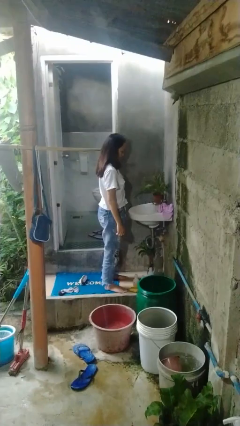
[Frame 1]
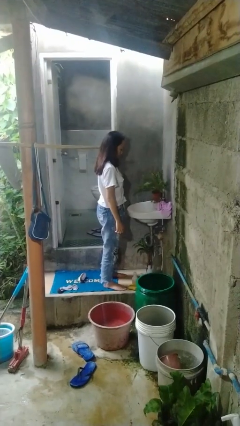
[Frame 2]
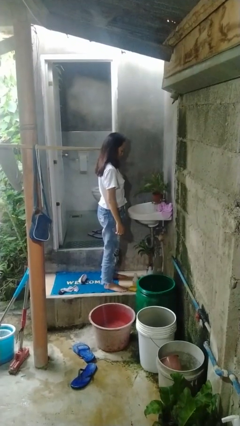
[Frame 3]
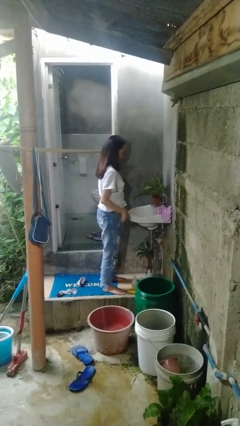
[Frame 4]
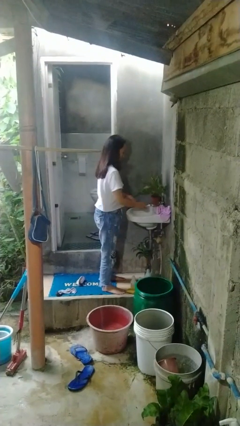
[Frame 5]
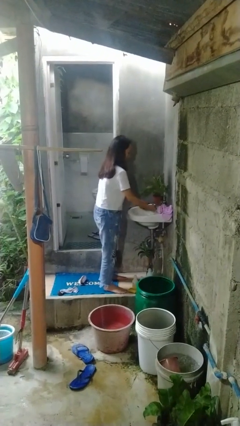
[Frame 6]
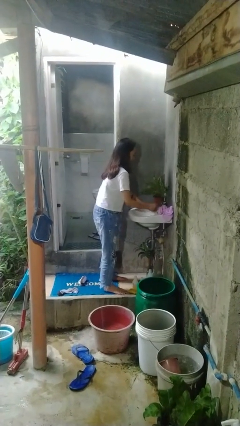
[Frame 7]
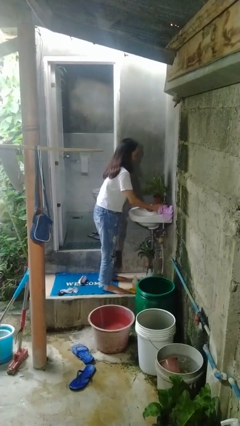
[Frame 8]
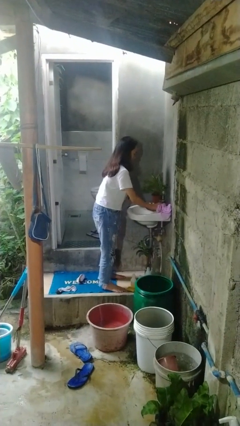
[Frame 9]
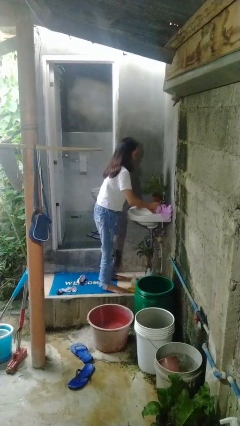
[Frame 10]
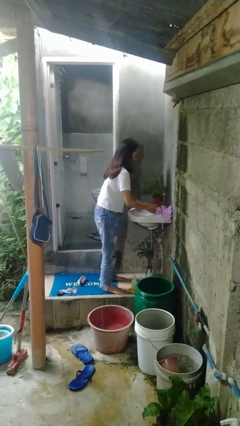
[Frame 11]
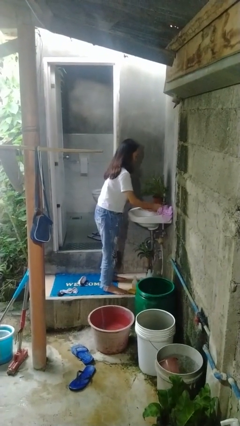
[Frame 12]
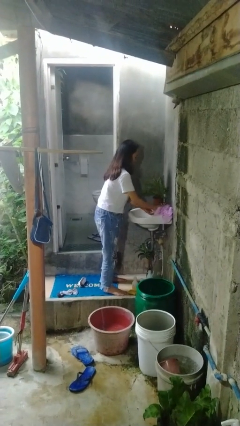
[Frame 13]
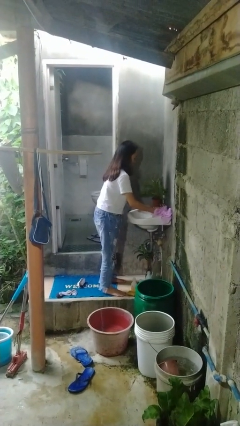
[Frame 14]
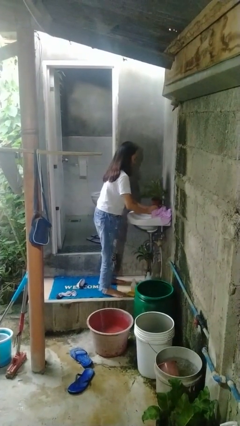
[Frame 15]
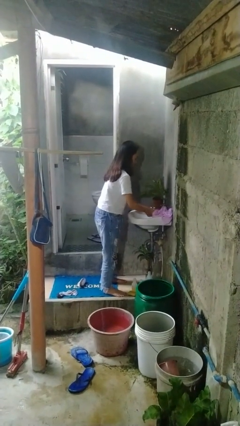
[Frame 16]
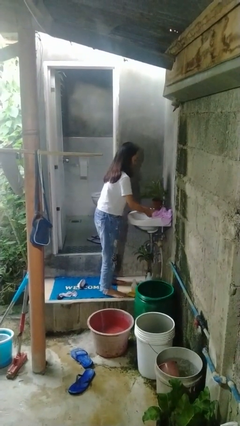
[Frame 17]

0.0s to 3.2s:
person washes hands

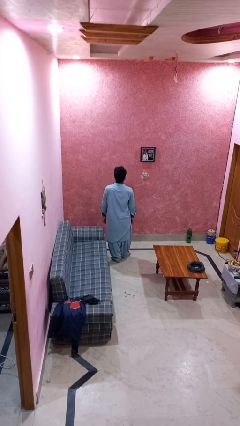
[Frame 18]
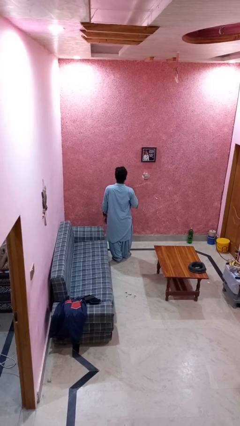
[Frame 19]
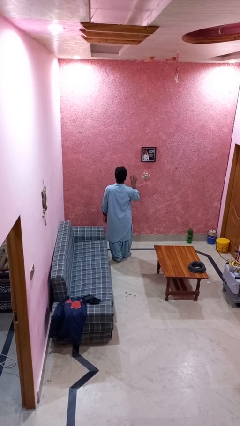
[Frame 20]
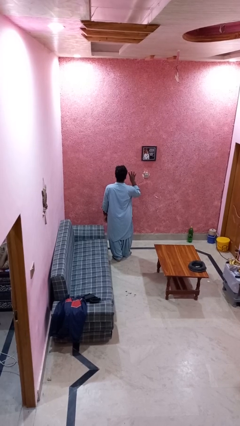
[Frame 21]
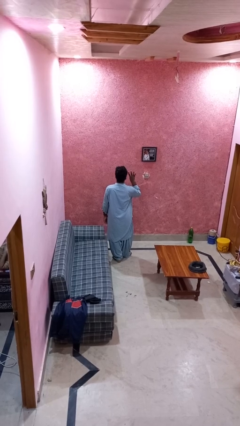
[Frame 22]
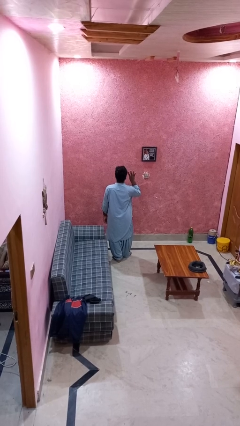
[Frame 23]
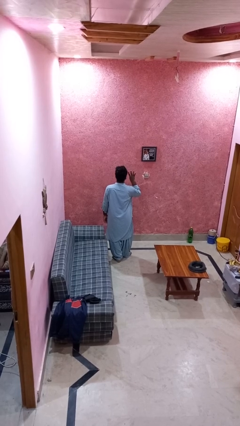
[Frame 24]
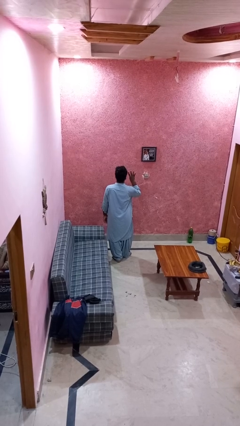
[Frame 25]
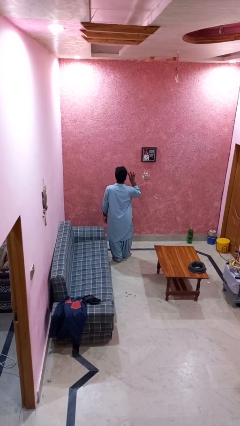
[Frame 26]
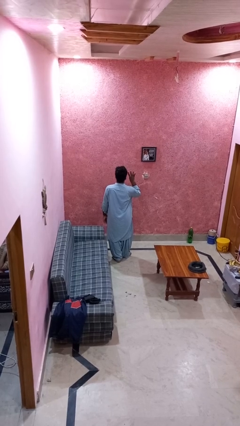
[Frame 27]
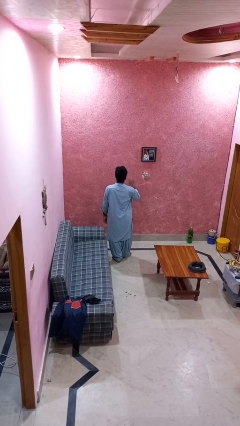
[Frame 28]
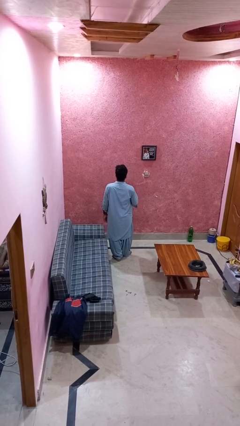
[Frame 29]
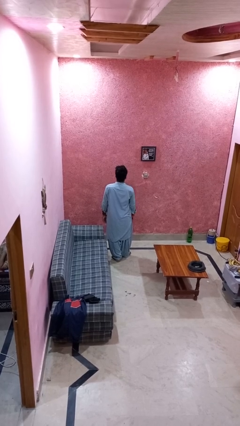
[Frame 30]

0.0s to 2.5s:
person gestures number four

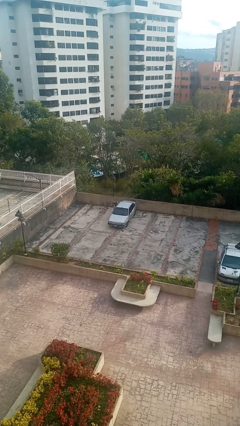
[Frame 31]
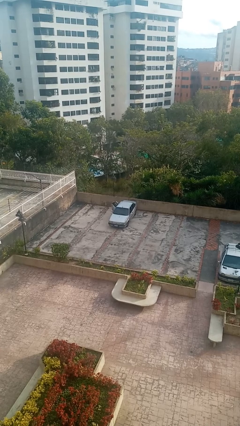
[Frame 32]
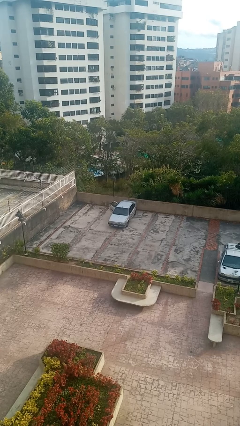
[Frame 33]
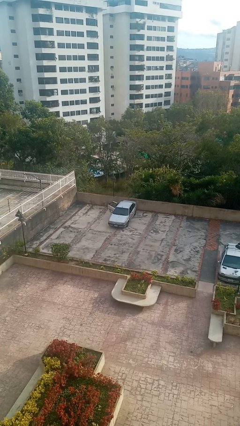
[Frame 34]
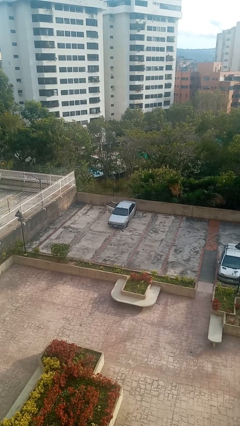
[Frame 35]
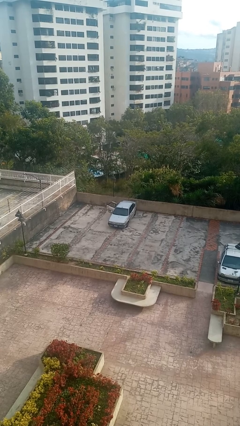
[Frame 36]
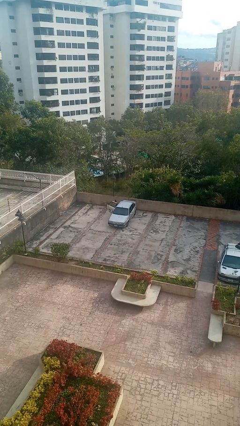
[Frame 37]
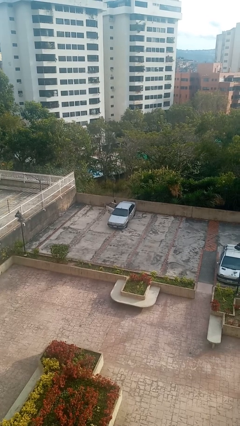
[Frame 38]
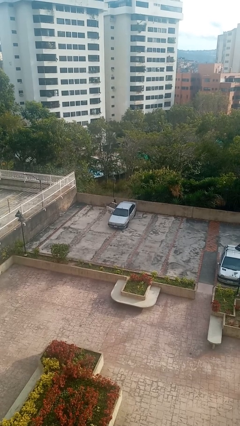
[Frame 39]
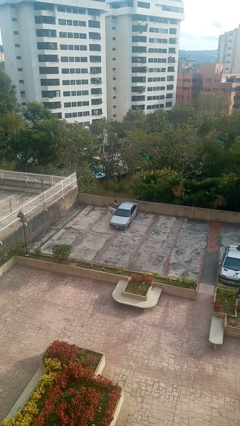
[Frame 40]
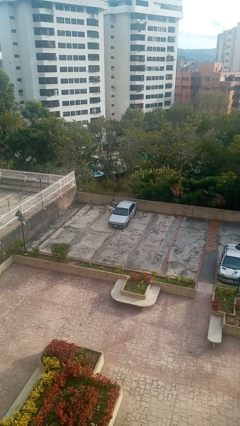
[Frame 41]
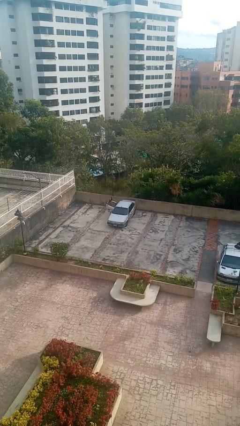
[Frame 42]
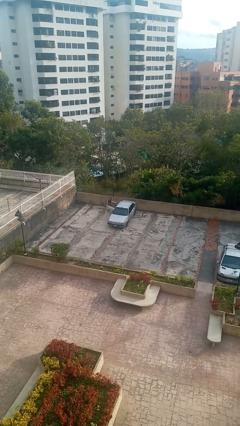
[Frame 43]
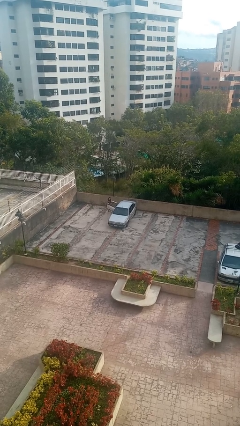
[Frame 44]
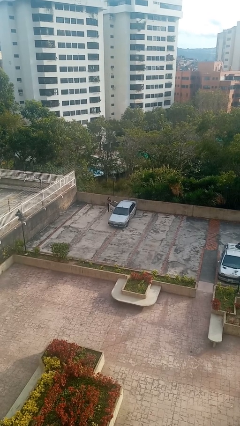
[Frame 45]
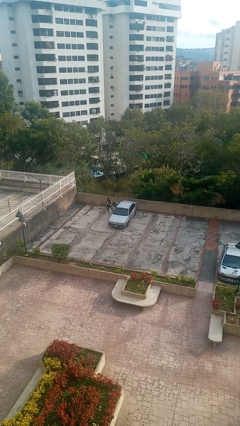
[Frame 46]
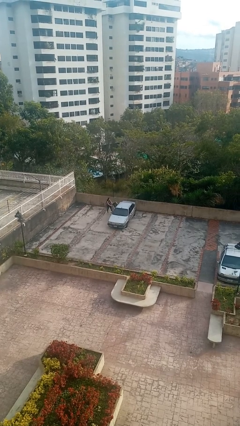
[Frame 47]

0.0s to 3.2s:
car drops off person

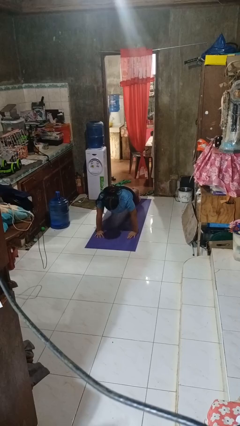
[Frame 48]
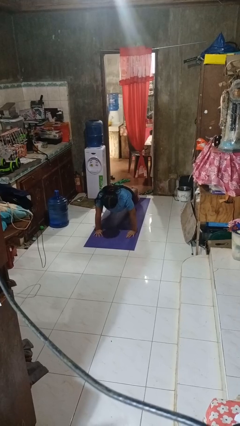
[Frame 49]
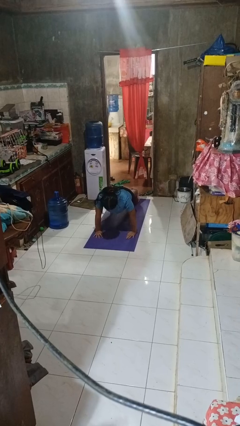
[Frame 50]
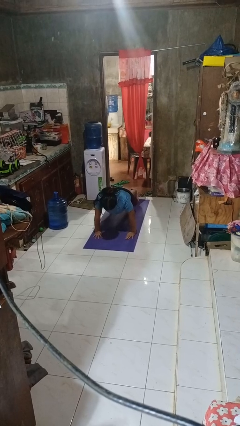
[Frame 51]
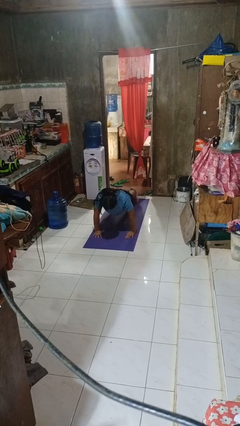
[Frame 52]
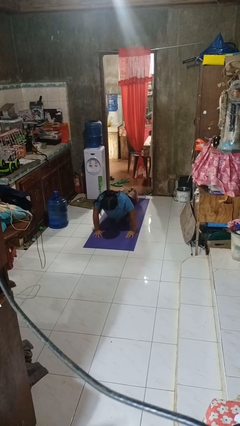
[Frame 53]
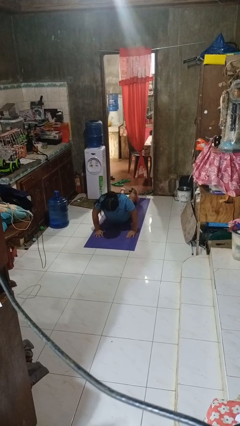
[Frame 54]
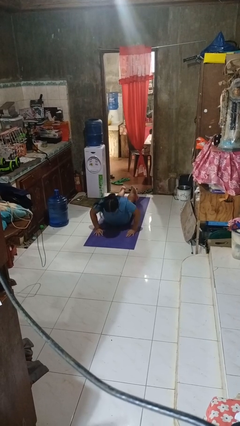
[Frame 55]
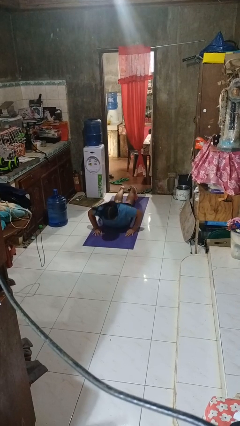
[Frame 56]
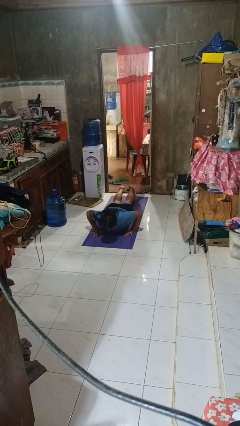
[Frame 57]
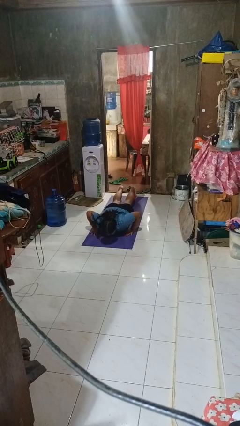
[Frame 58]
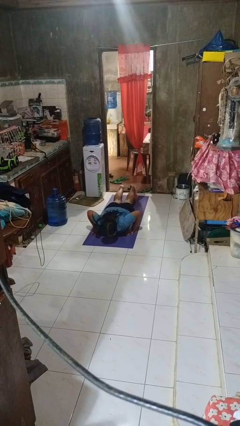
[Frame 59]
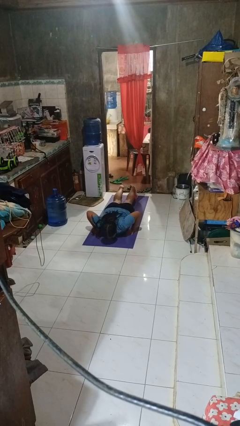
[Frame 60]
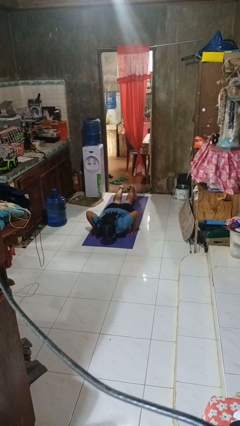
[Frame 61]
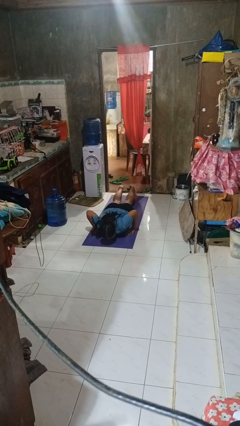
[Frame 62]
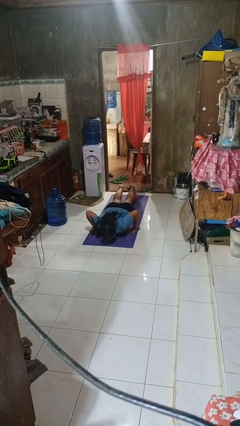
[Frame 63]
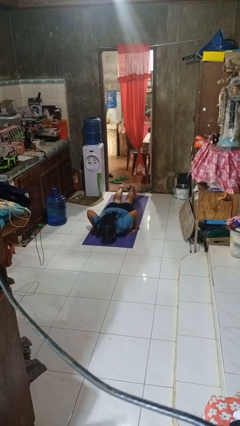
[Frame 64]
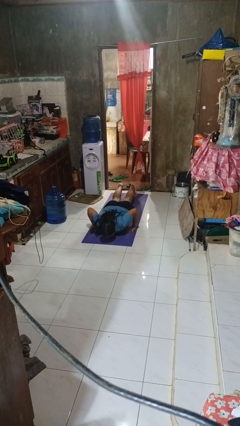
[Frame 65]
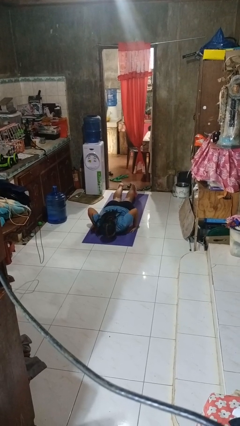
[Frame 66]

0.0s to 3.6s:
person exercises with pushup

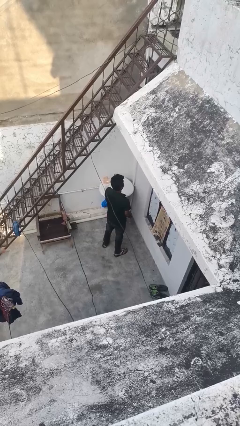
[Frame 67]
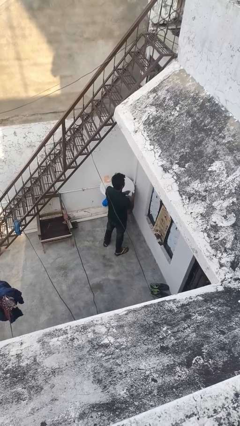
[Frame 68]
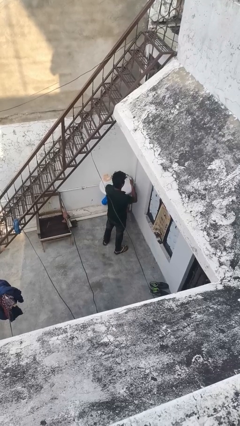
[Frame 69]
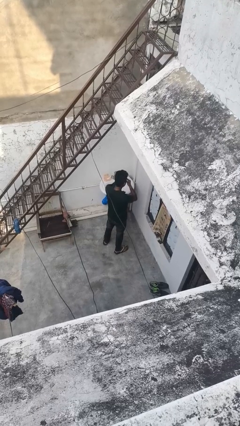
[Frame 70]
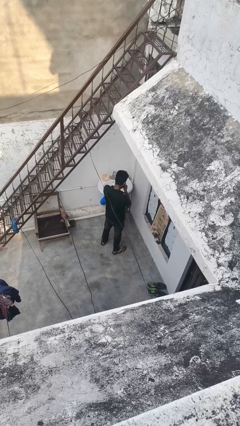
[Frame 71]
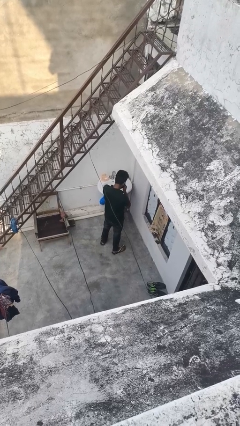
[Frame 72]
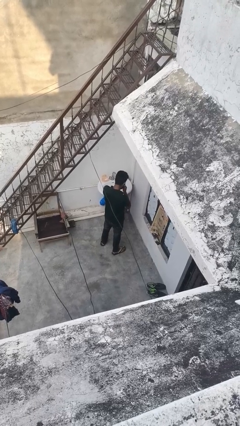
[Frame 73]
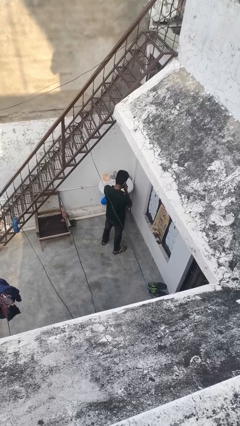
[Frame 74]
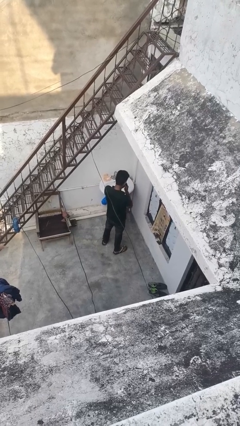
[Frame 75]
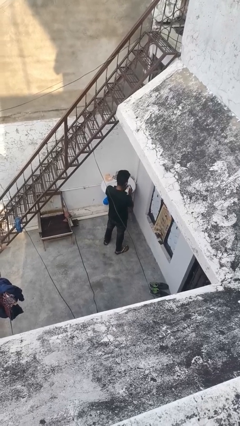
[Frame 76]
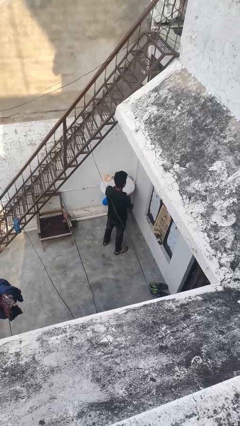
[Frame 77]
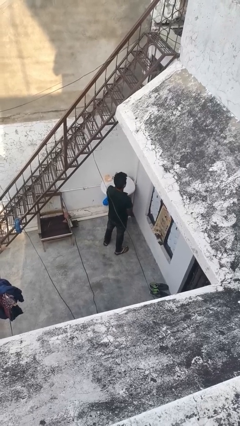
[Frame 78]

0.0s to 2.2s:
person blows nose

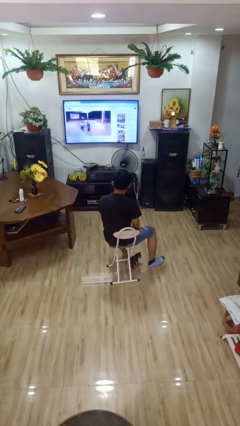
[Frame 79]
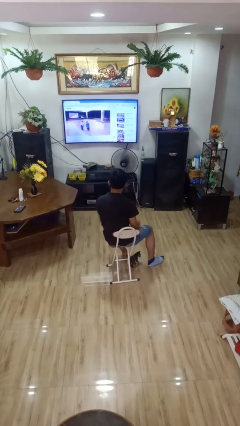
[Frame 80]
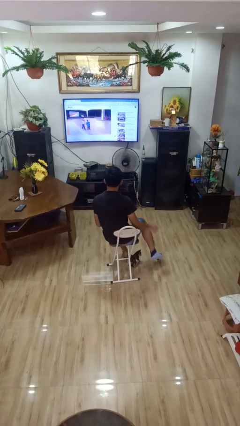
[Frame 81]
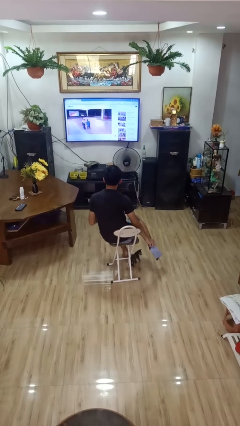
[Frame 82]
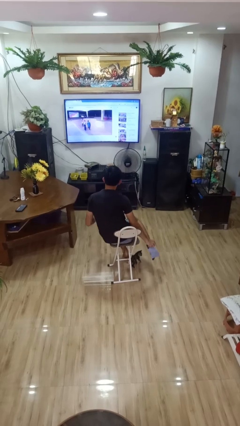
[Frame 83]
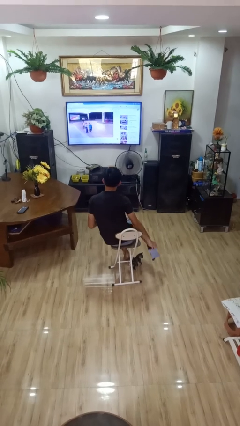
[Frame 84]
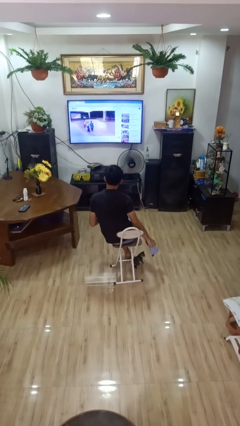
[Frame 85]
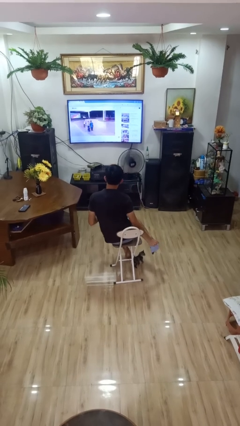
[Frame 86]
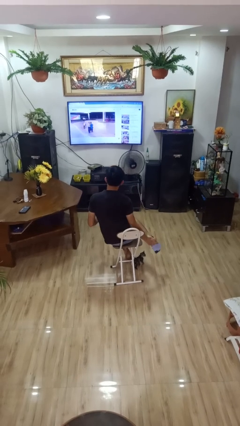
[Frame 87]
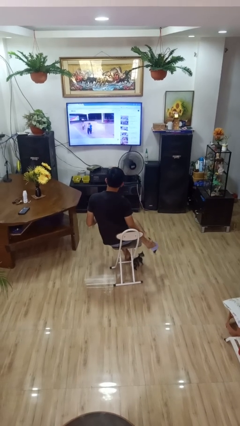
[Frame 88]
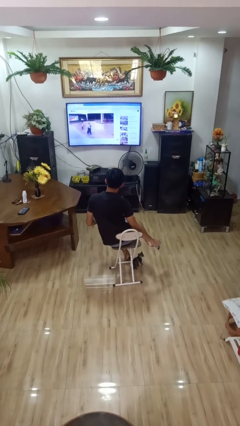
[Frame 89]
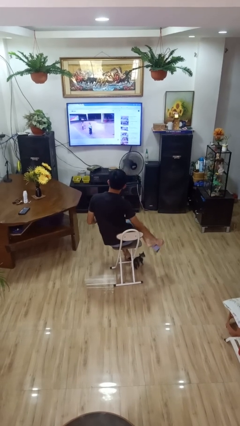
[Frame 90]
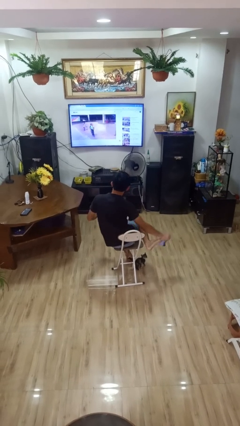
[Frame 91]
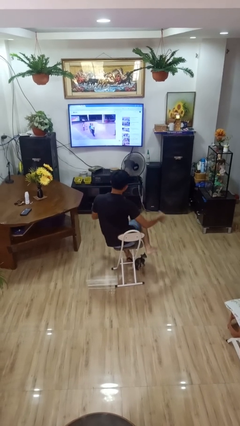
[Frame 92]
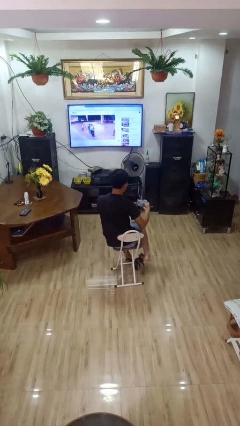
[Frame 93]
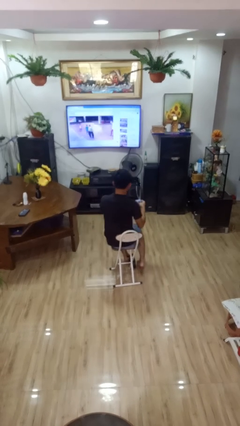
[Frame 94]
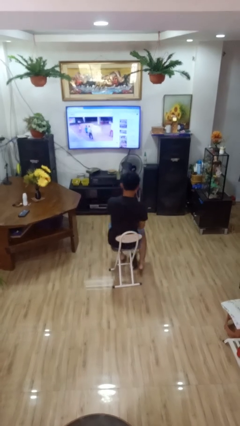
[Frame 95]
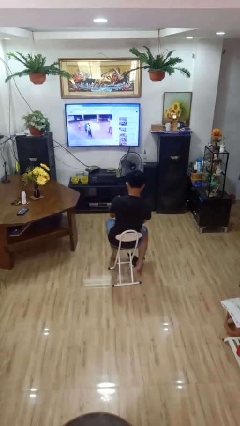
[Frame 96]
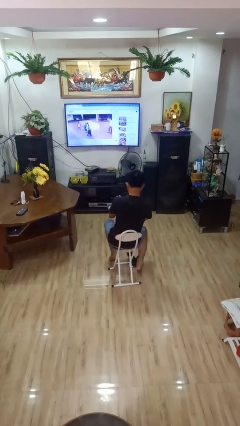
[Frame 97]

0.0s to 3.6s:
person takes off socks
